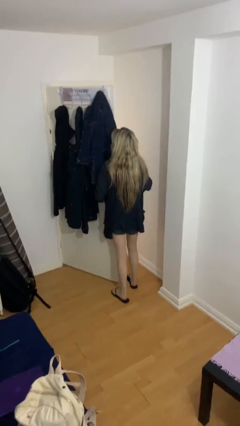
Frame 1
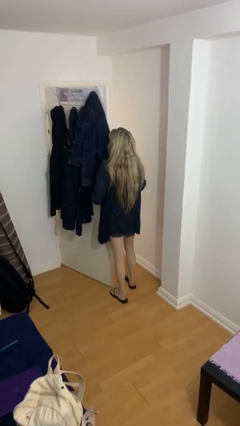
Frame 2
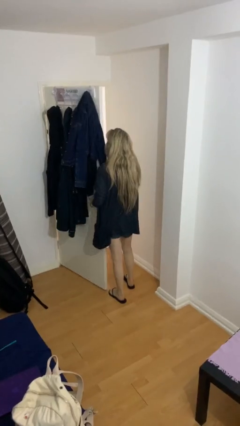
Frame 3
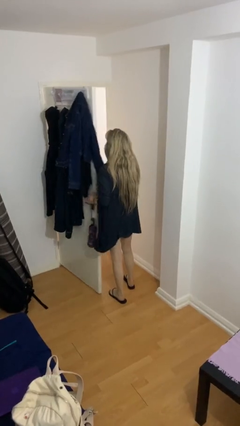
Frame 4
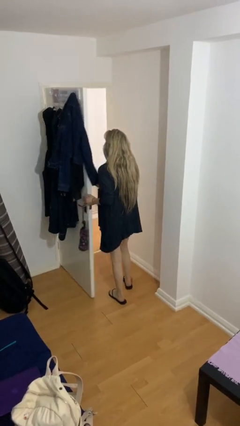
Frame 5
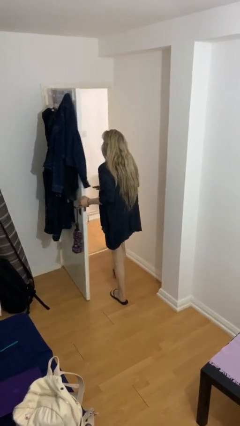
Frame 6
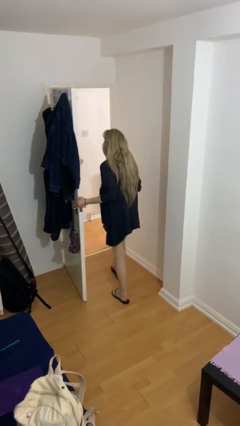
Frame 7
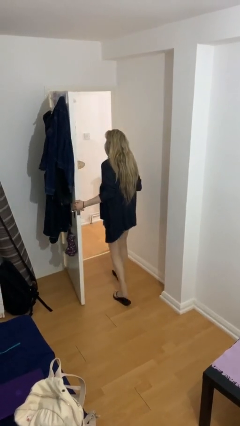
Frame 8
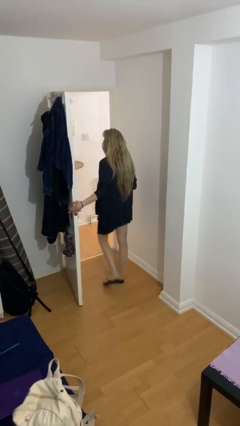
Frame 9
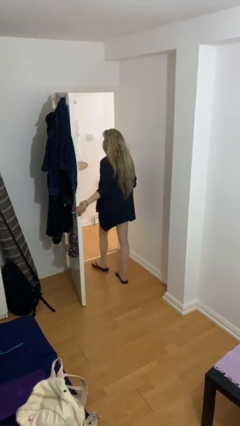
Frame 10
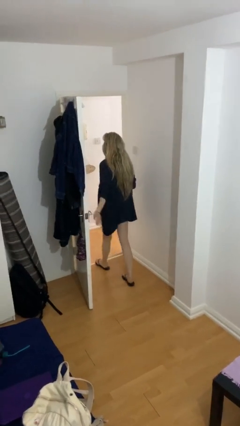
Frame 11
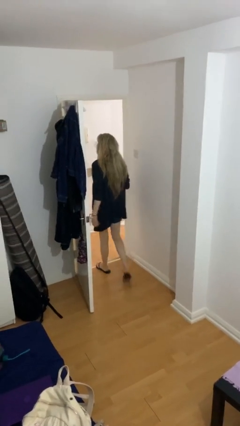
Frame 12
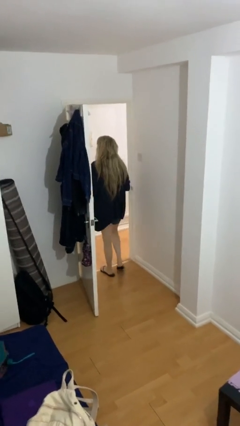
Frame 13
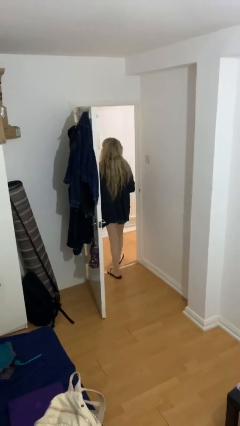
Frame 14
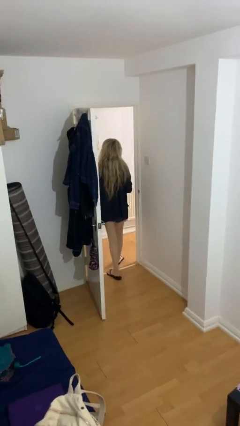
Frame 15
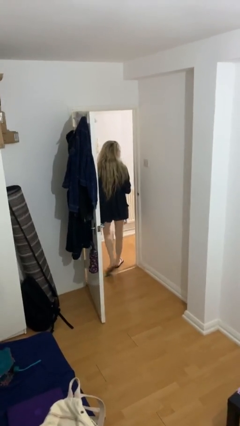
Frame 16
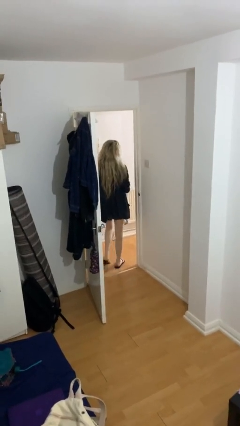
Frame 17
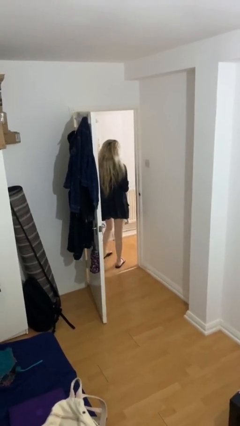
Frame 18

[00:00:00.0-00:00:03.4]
person exits scene through structure

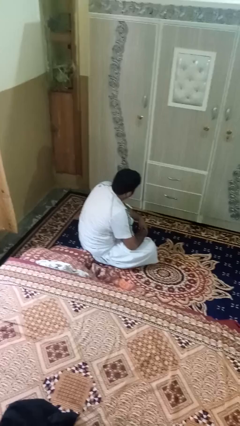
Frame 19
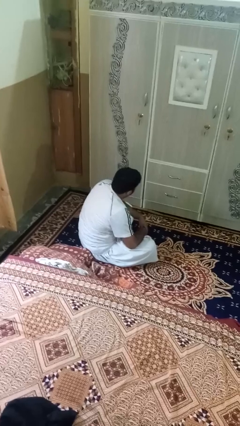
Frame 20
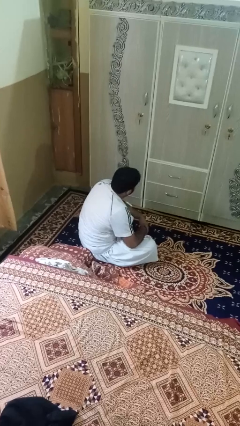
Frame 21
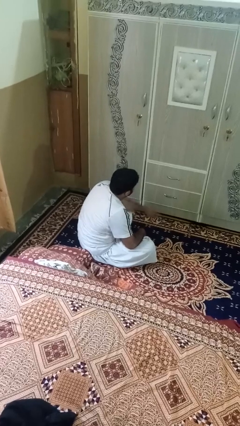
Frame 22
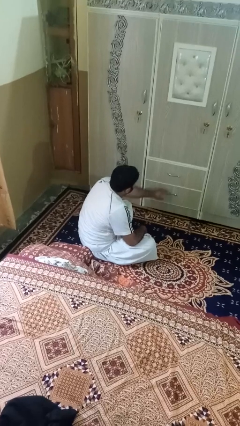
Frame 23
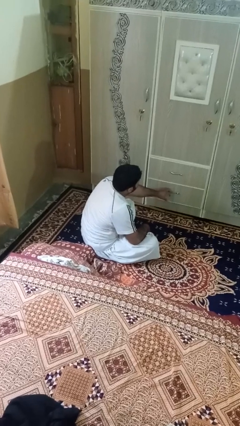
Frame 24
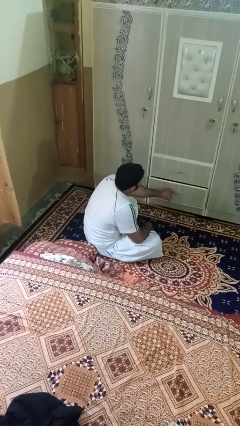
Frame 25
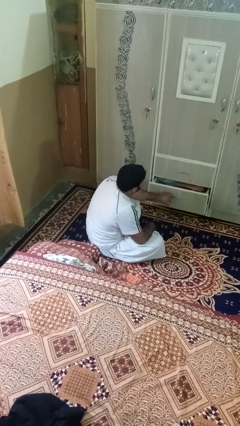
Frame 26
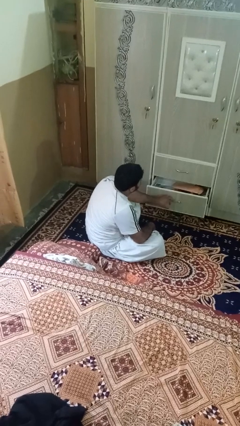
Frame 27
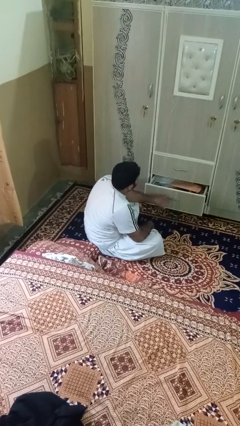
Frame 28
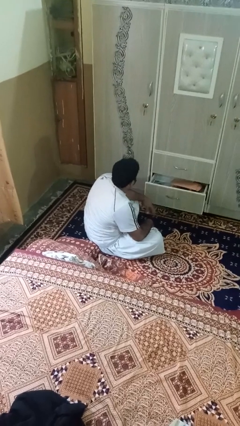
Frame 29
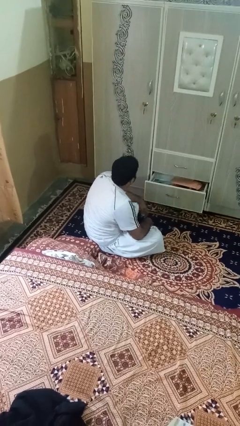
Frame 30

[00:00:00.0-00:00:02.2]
person opens dresser drawer

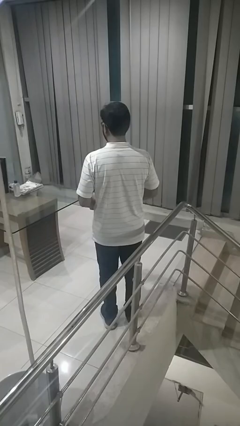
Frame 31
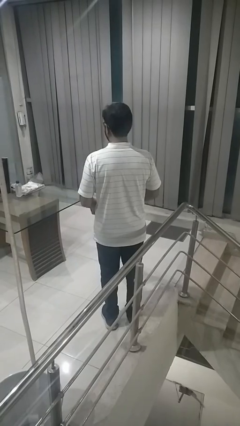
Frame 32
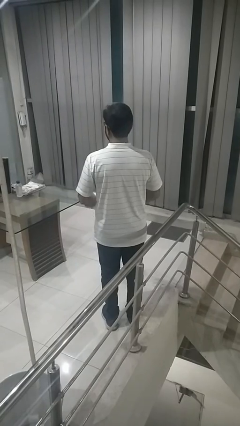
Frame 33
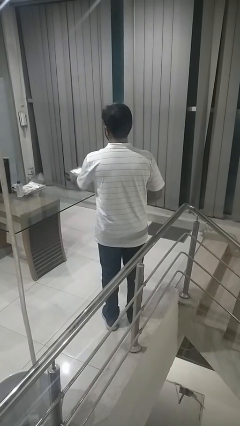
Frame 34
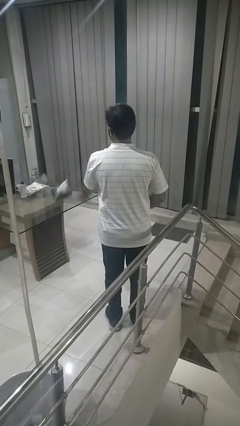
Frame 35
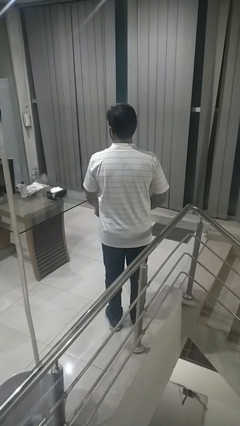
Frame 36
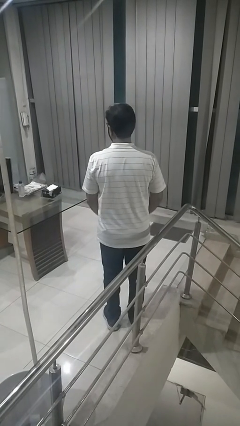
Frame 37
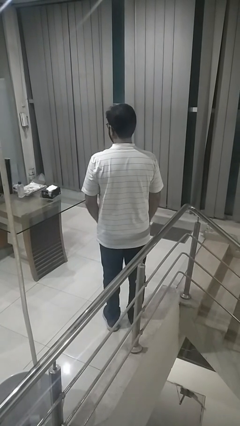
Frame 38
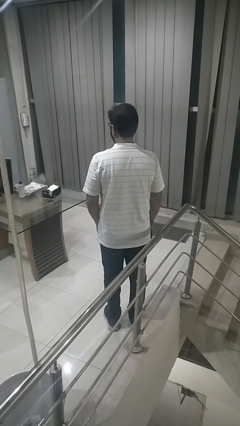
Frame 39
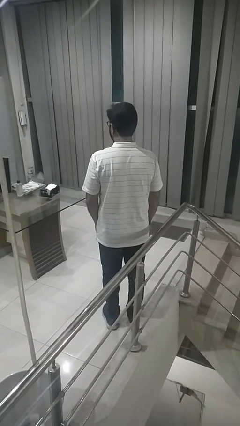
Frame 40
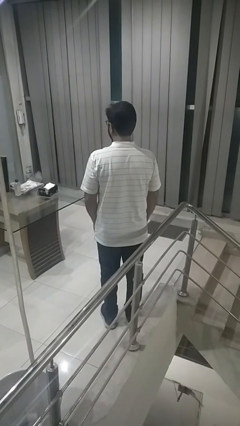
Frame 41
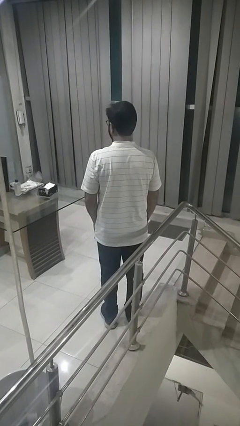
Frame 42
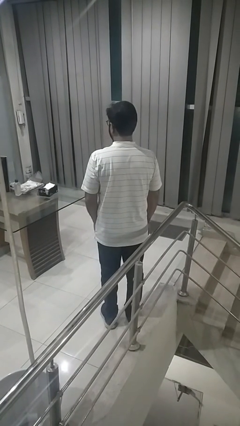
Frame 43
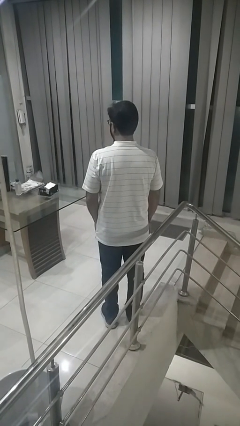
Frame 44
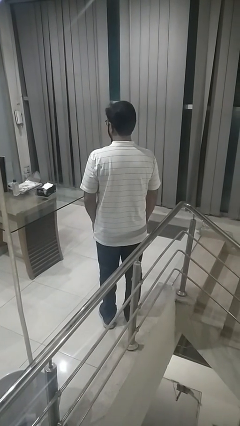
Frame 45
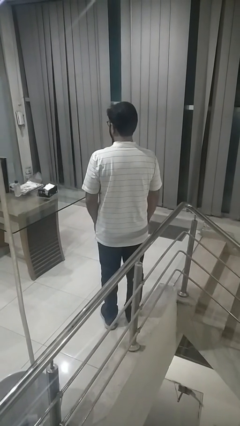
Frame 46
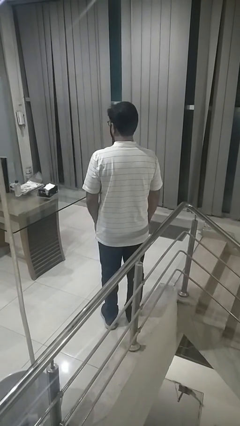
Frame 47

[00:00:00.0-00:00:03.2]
person throws object on table

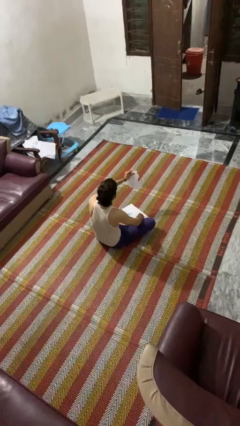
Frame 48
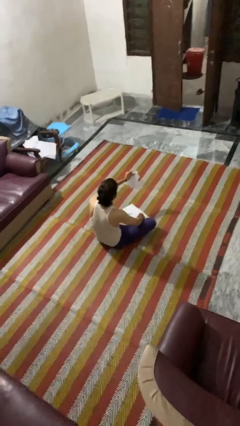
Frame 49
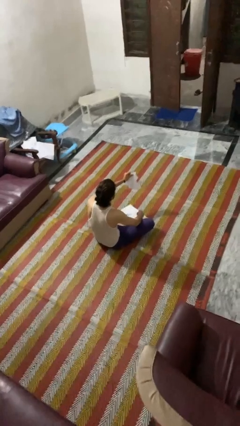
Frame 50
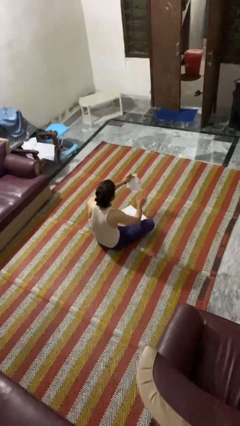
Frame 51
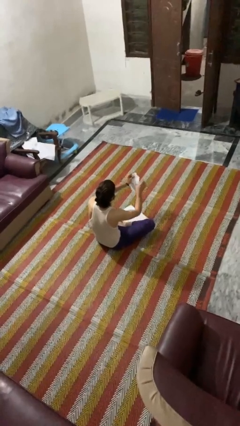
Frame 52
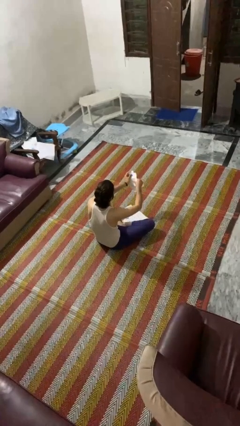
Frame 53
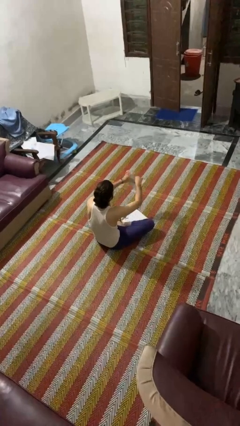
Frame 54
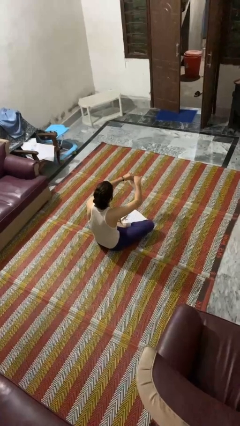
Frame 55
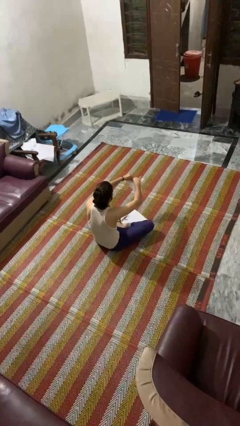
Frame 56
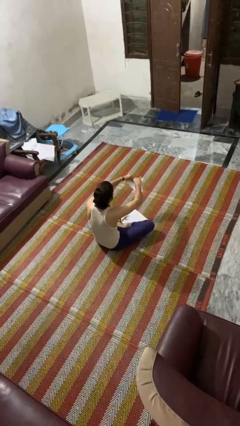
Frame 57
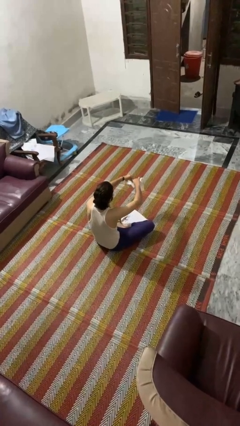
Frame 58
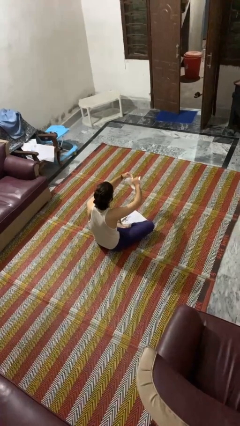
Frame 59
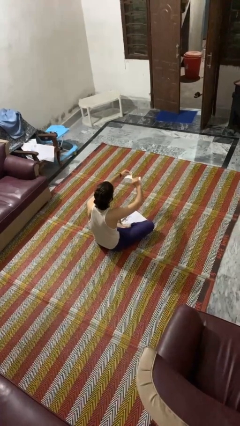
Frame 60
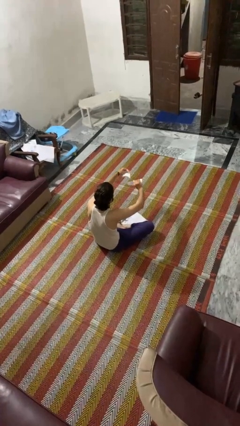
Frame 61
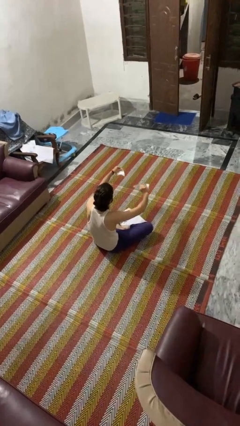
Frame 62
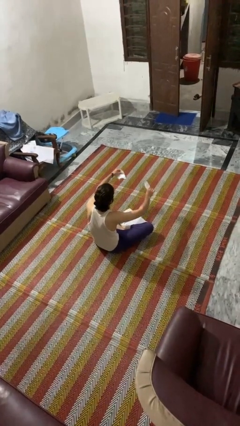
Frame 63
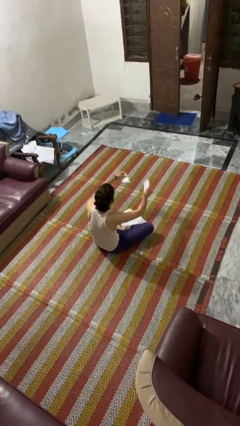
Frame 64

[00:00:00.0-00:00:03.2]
person tears paper

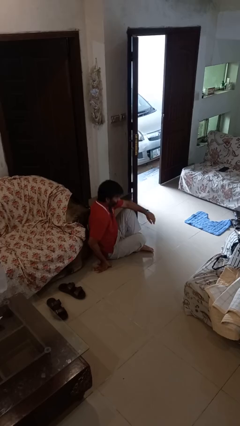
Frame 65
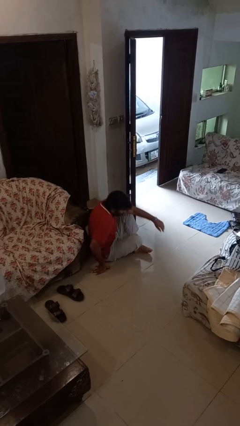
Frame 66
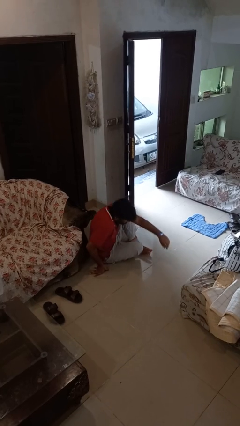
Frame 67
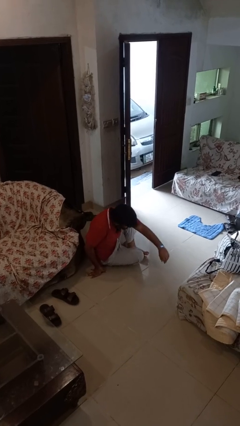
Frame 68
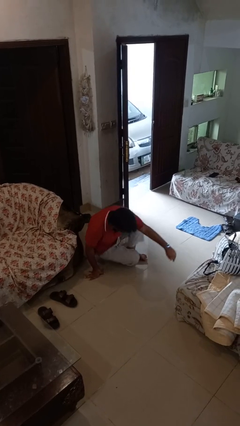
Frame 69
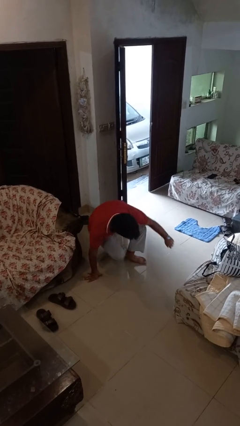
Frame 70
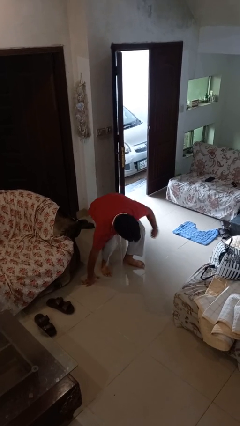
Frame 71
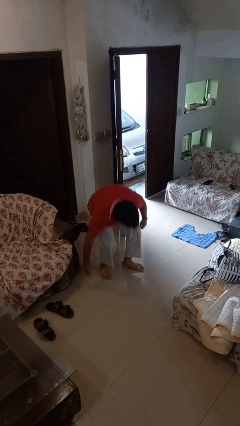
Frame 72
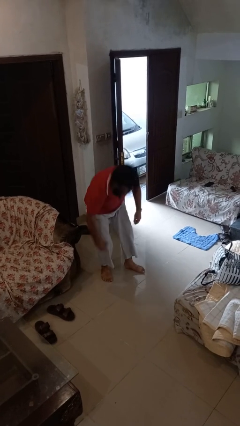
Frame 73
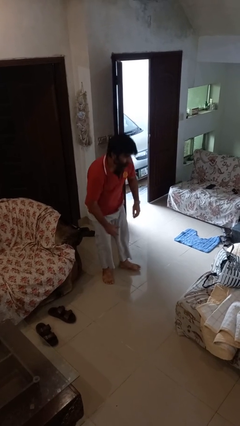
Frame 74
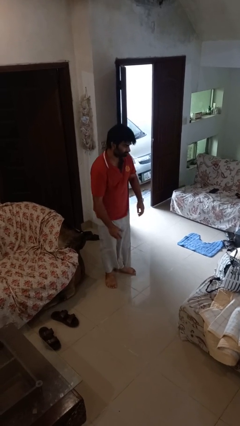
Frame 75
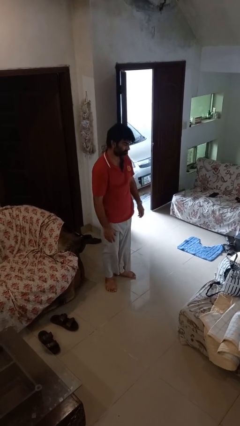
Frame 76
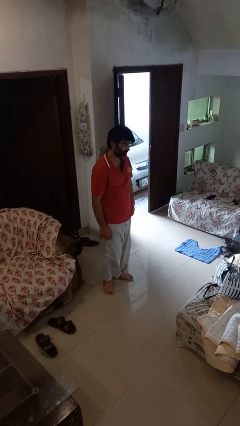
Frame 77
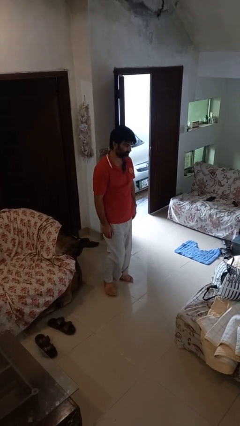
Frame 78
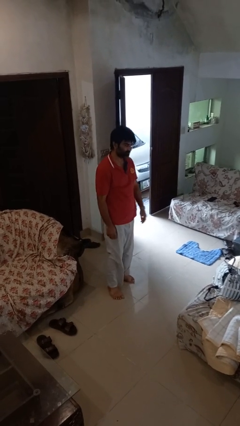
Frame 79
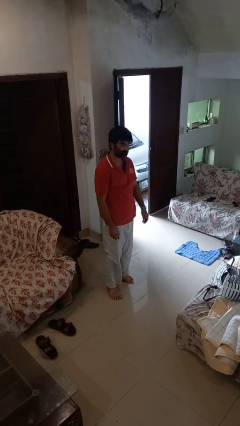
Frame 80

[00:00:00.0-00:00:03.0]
person stands up from floor

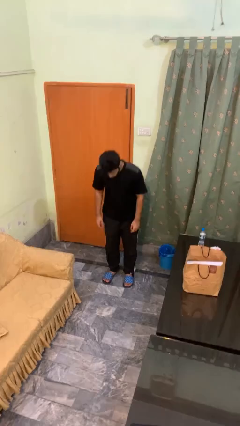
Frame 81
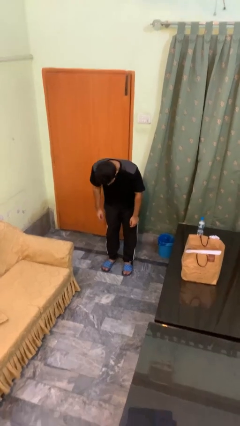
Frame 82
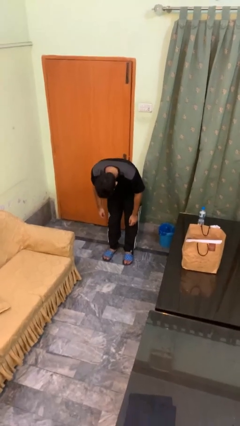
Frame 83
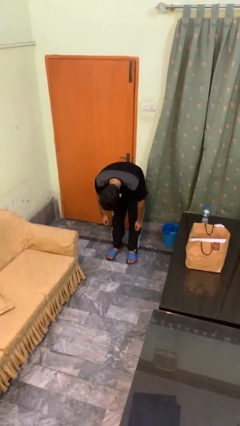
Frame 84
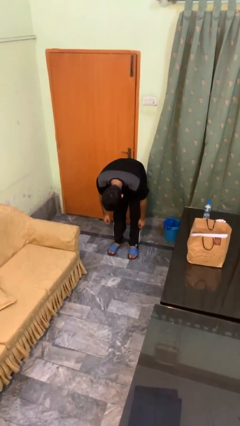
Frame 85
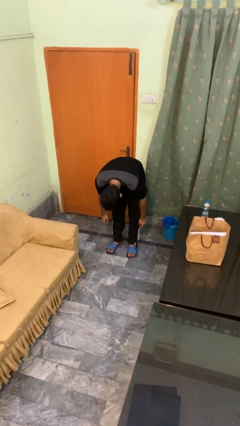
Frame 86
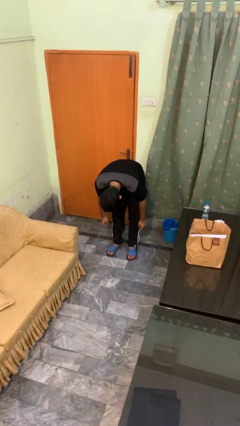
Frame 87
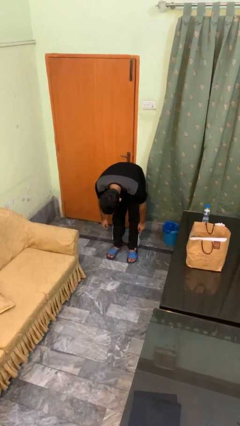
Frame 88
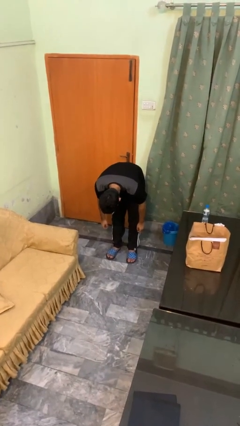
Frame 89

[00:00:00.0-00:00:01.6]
person bows

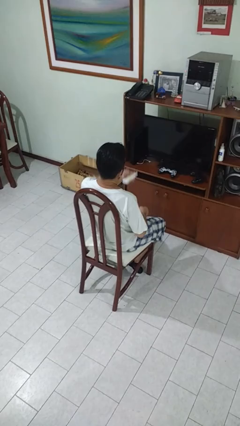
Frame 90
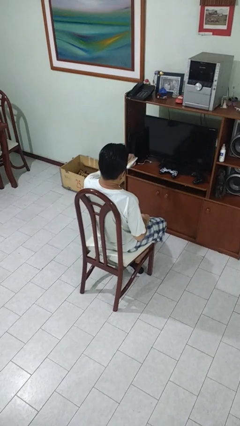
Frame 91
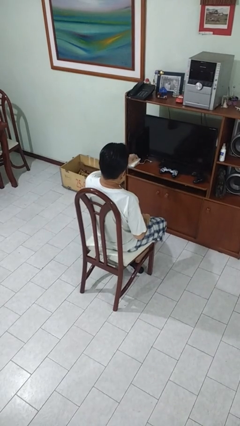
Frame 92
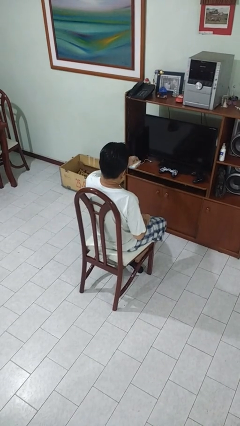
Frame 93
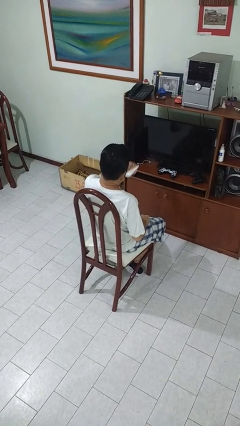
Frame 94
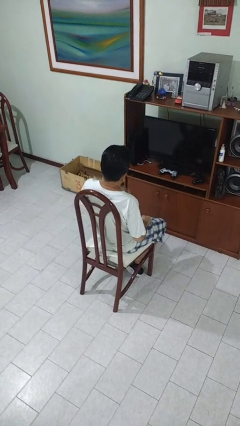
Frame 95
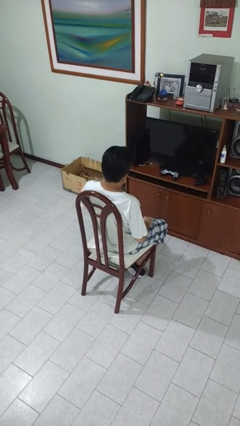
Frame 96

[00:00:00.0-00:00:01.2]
person uses television remote
